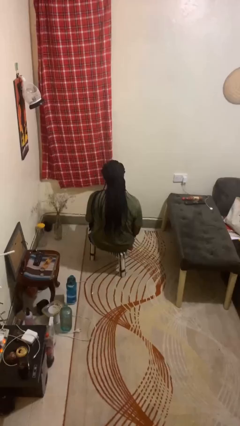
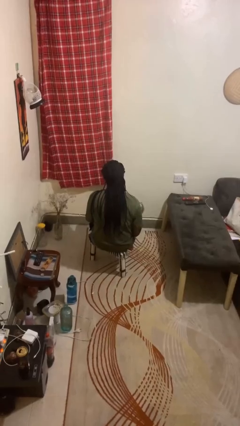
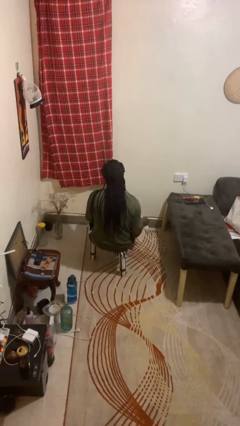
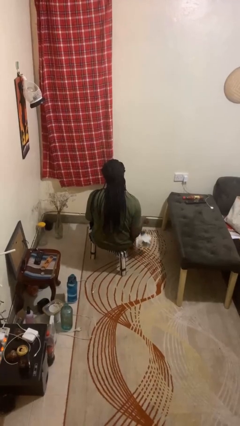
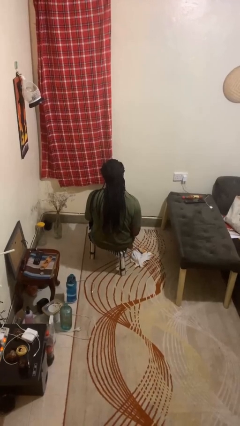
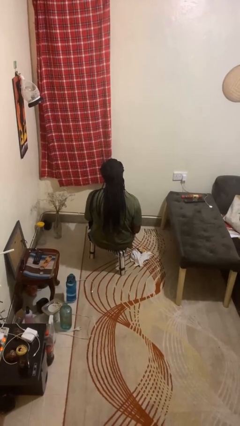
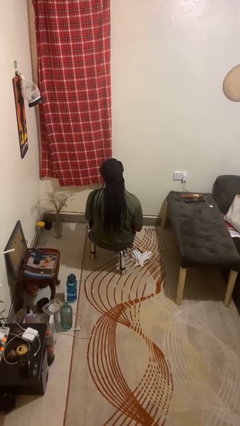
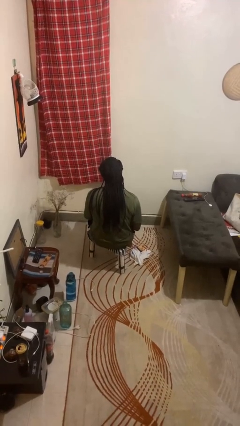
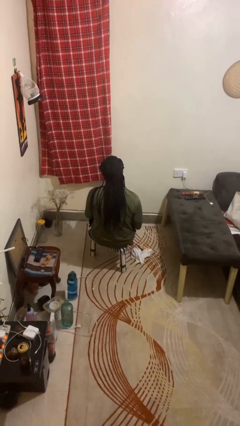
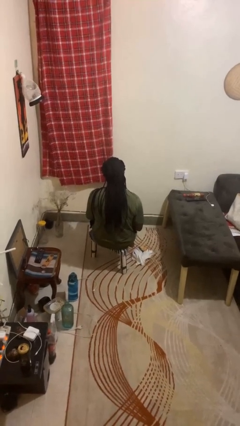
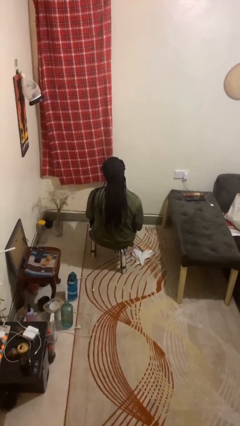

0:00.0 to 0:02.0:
person throws object to ground

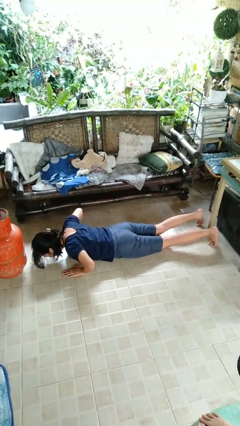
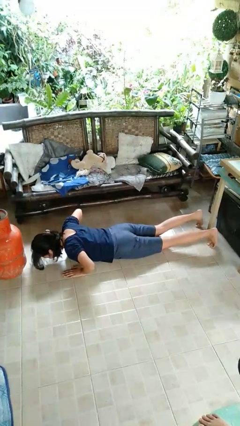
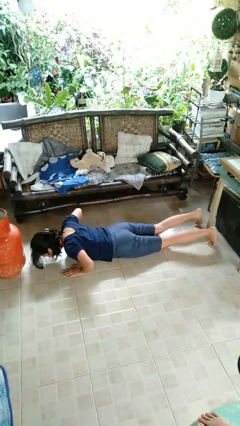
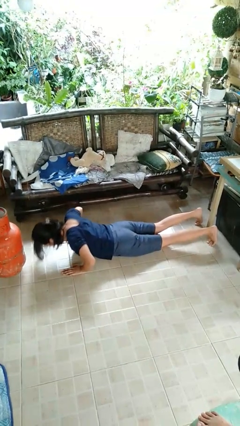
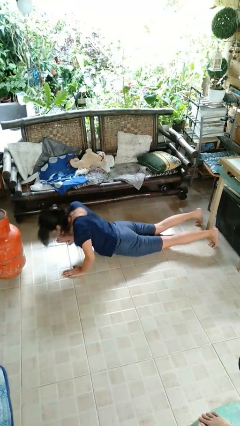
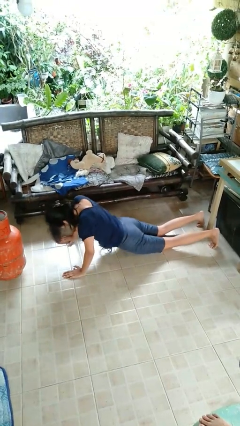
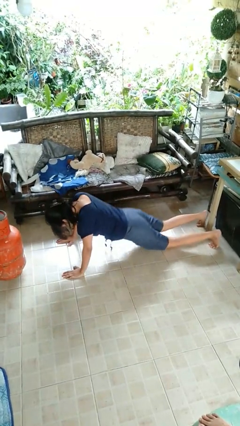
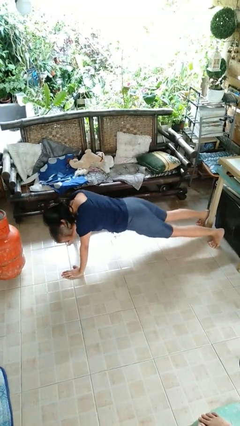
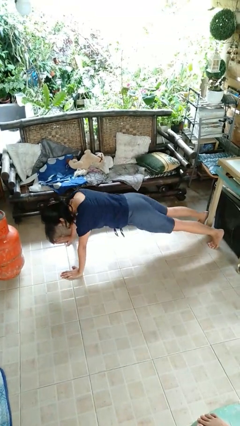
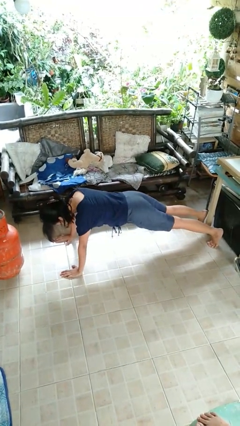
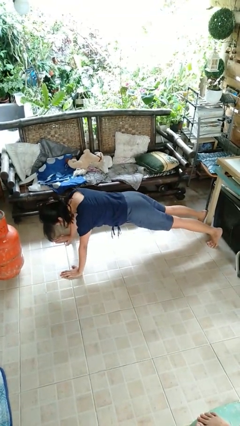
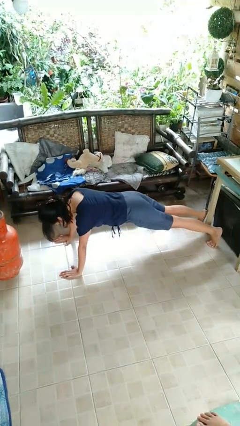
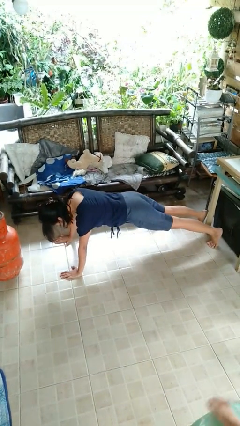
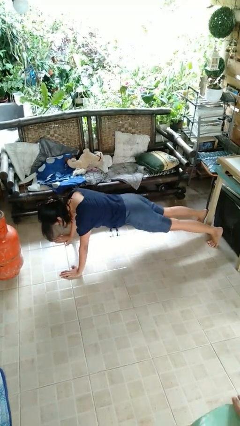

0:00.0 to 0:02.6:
person exercises with pushup

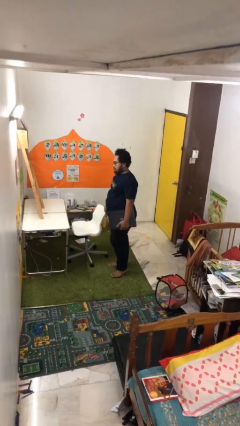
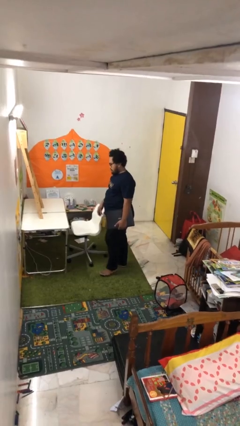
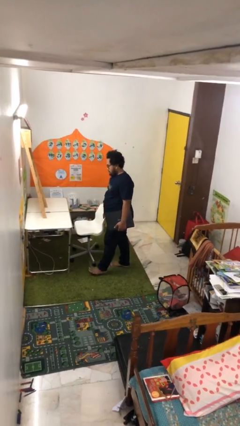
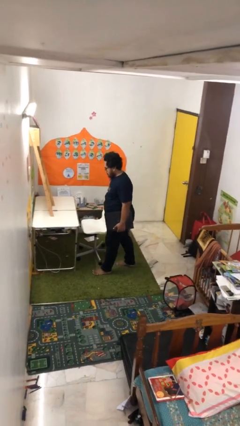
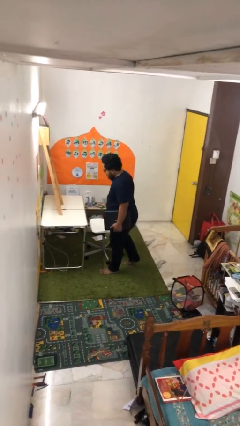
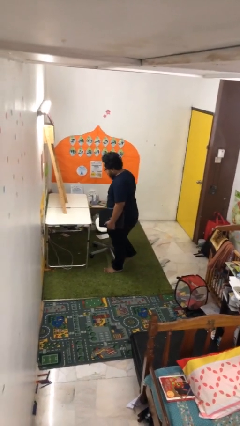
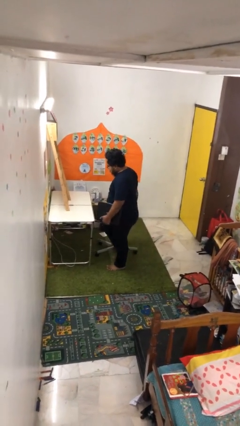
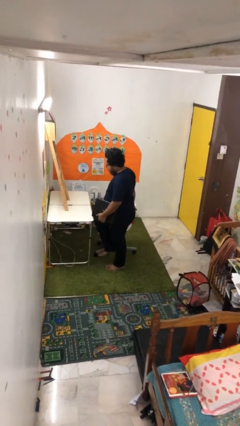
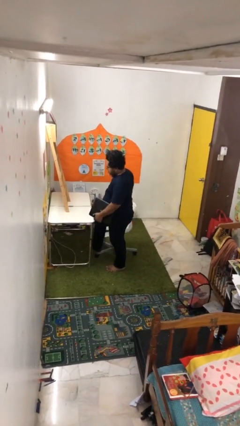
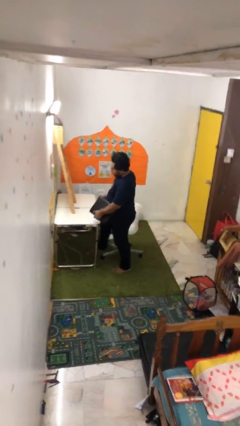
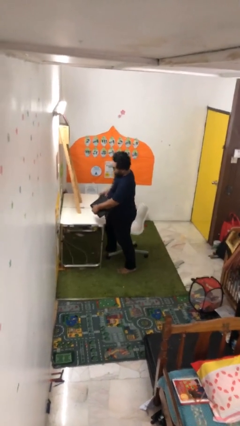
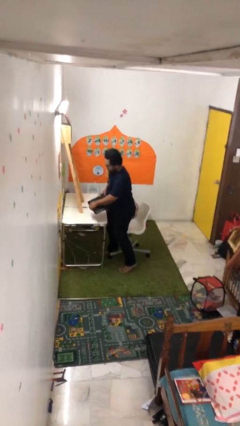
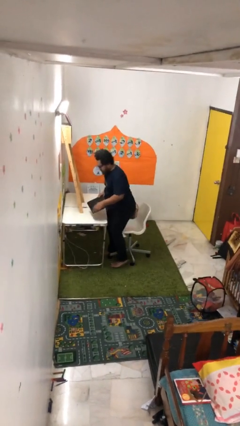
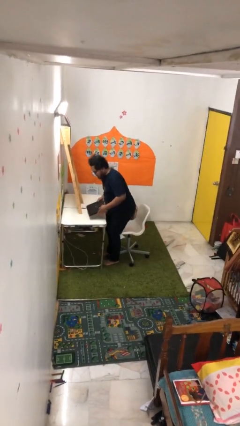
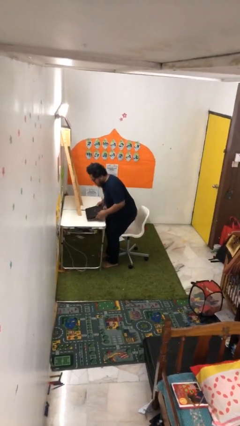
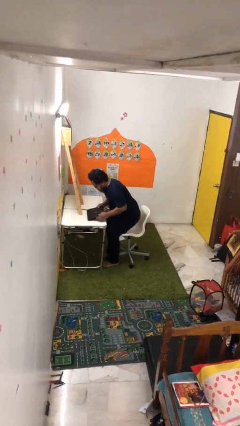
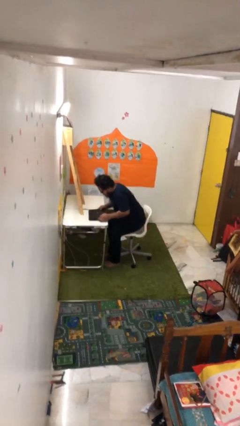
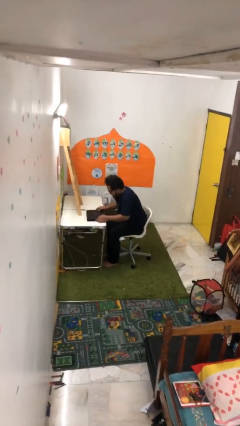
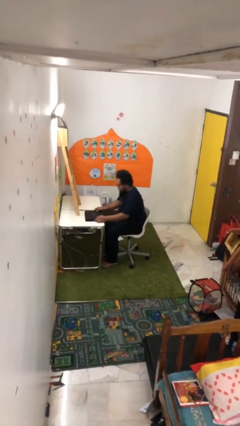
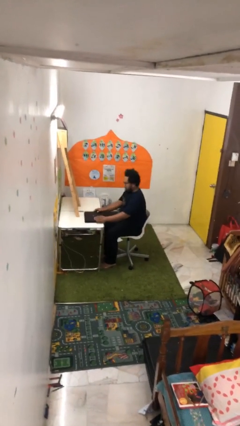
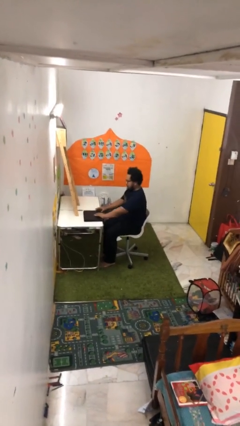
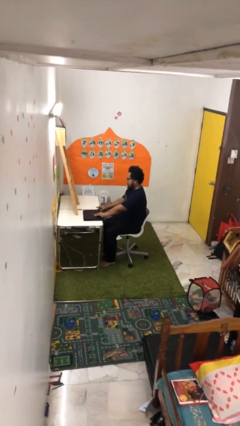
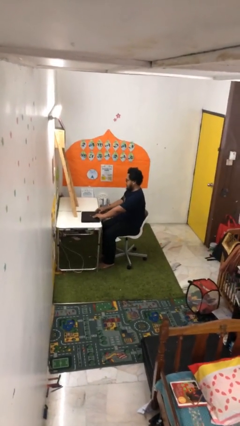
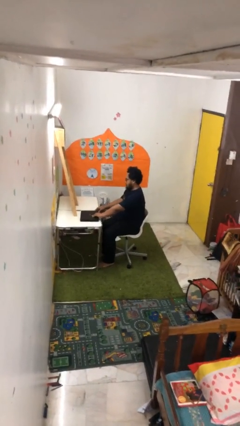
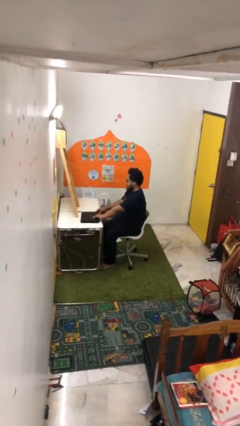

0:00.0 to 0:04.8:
person sits down

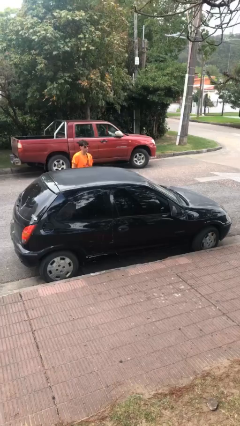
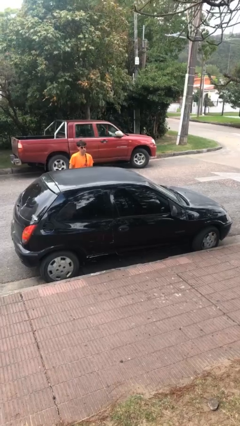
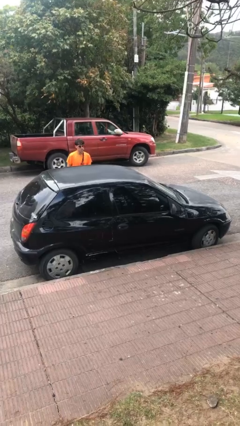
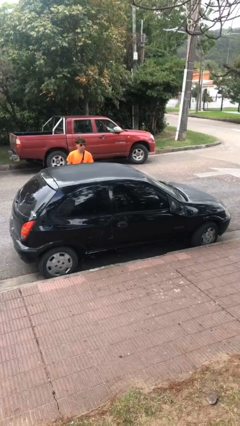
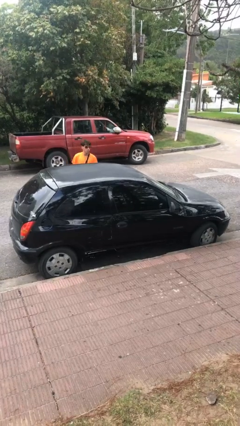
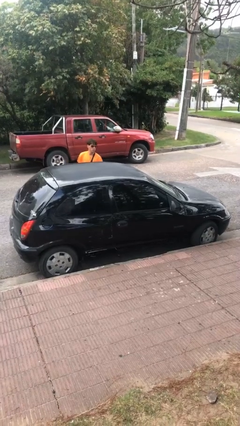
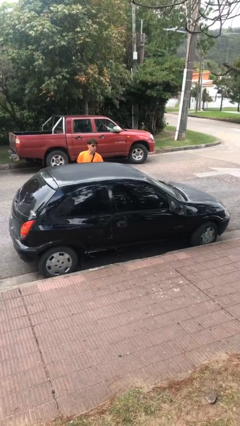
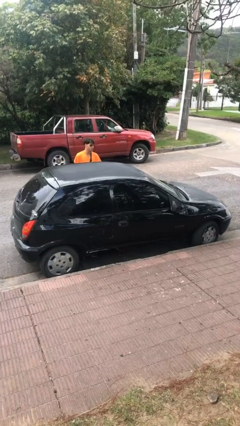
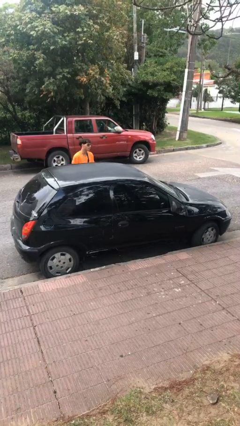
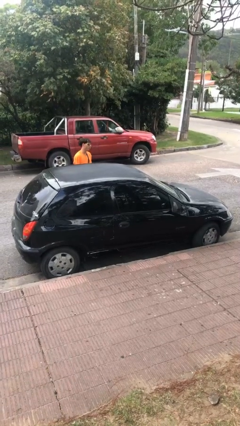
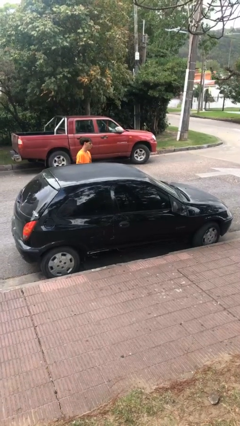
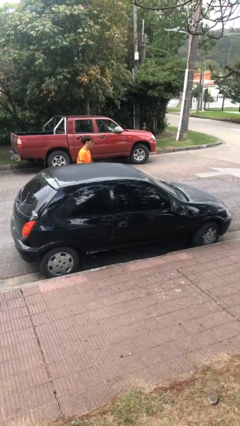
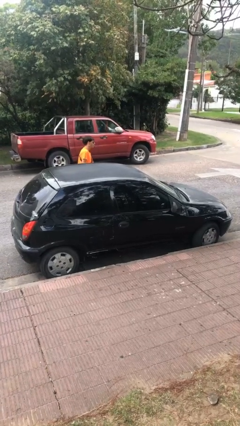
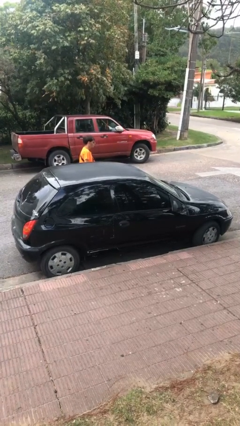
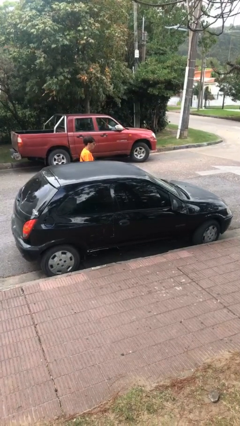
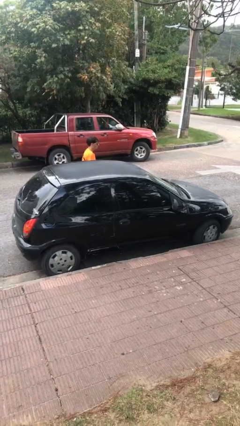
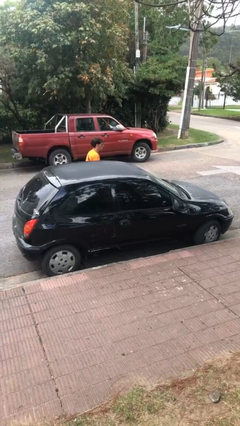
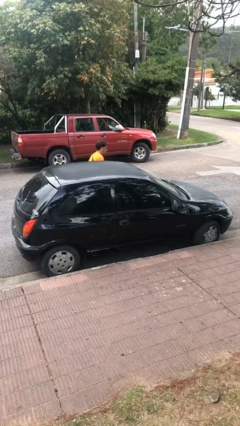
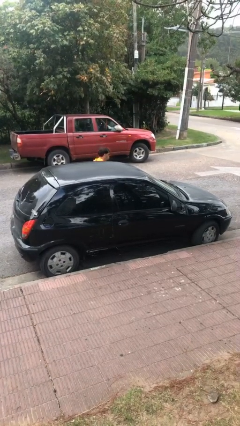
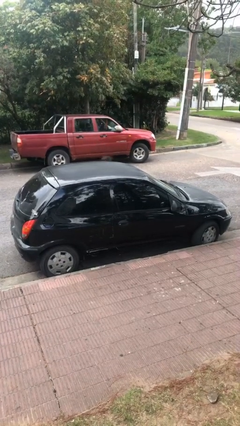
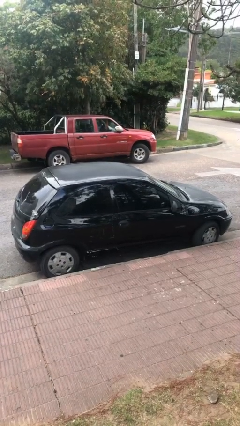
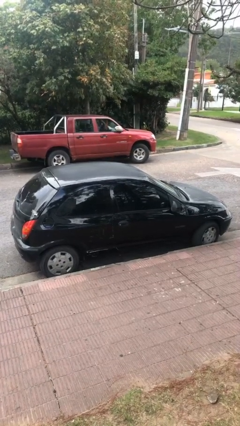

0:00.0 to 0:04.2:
car picks up person

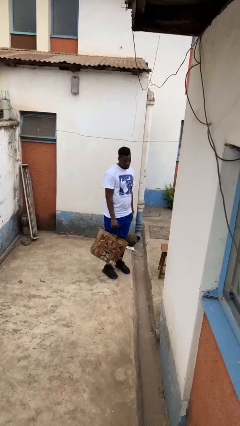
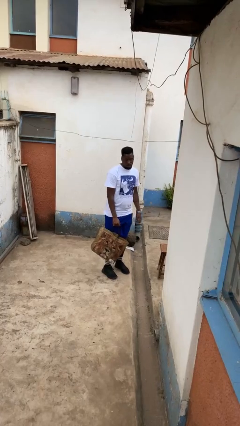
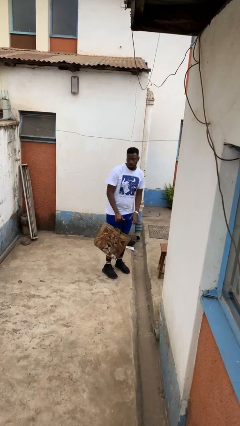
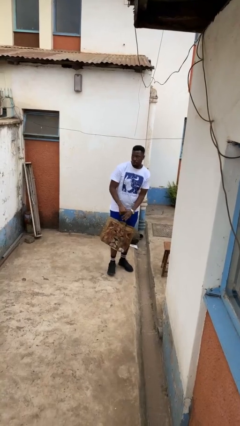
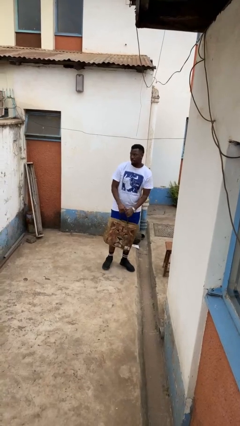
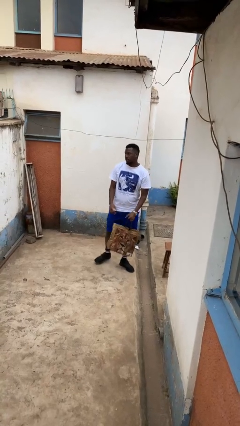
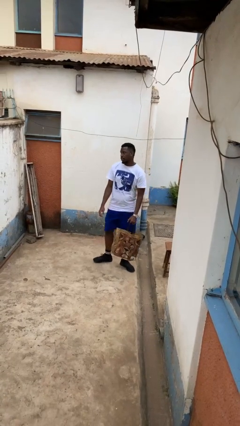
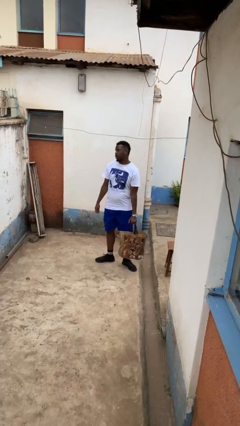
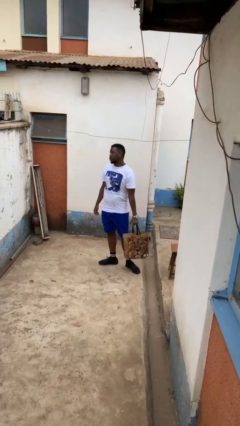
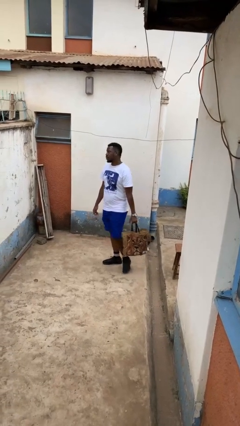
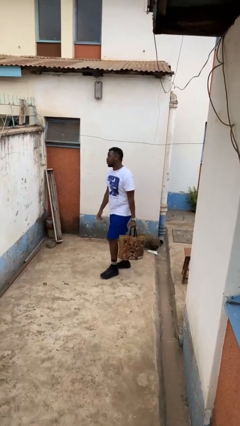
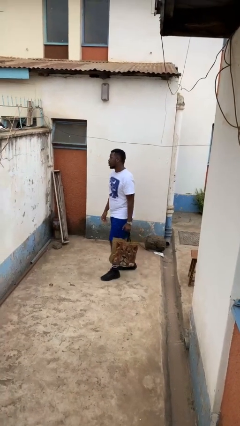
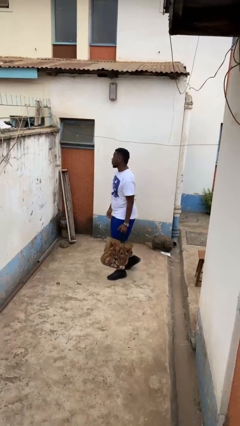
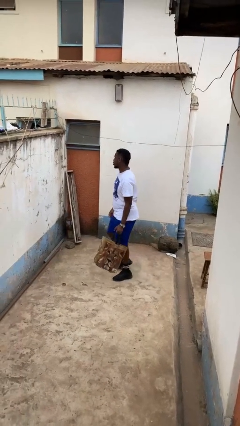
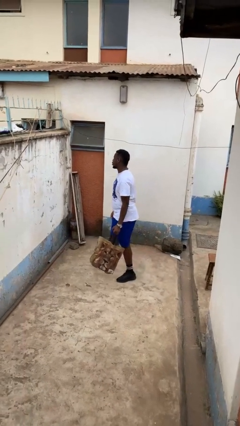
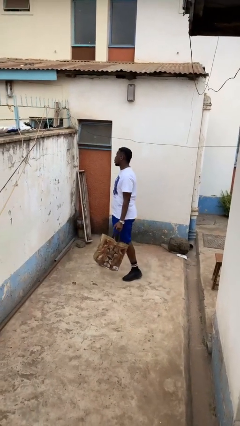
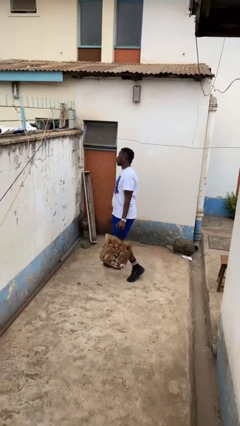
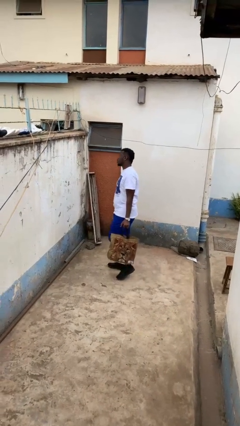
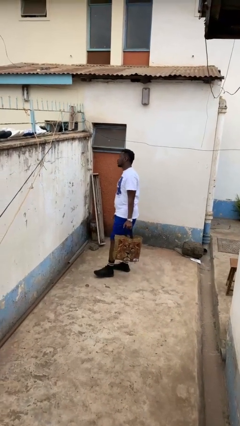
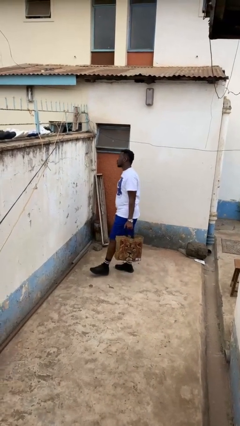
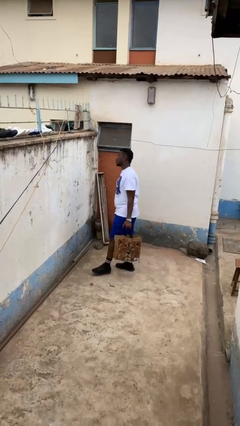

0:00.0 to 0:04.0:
person carries groceries
